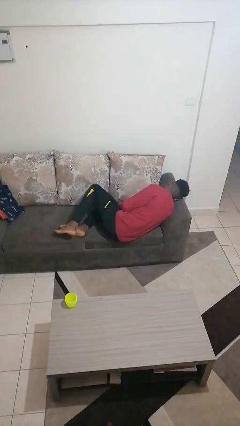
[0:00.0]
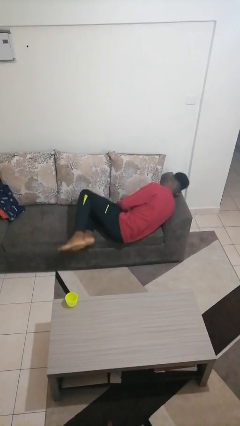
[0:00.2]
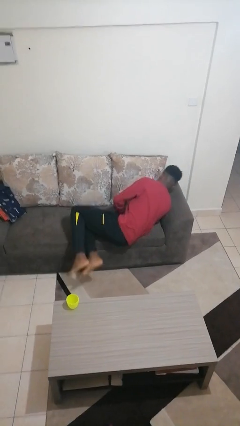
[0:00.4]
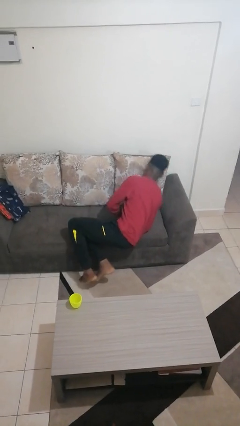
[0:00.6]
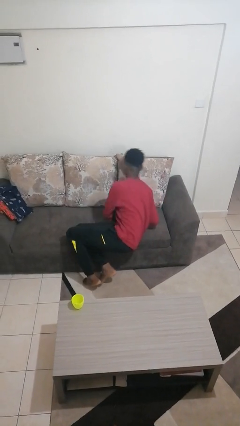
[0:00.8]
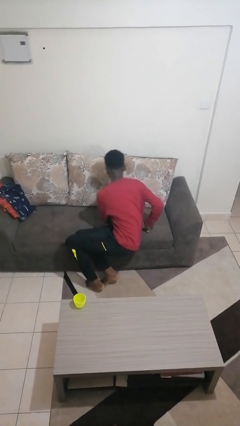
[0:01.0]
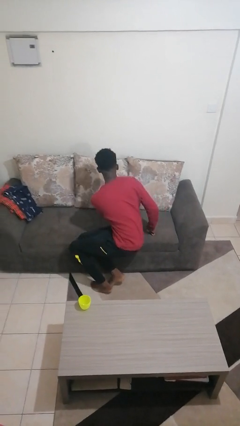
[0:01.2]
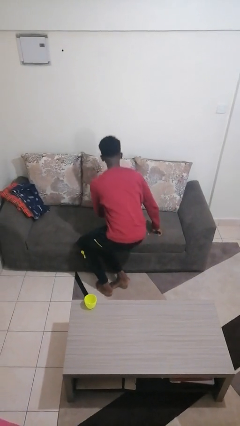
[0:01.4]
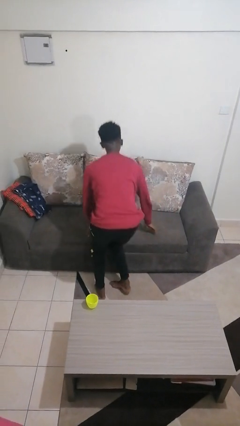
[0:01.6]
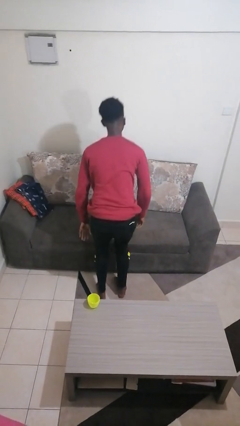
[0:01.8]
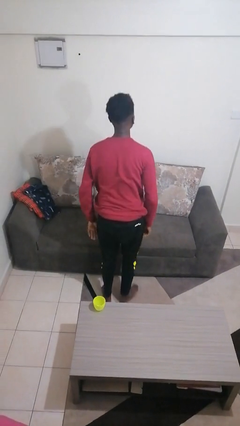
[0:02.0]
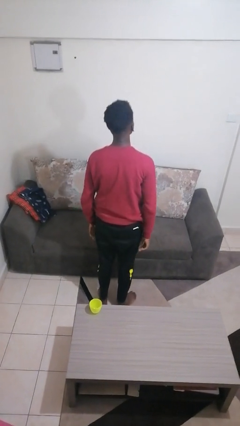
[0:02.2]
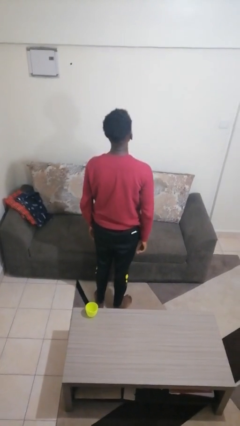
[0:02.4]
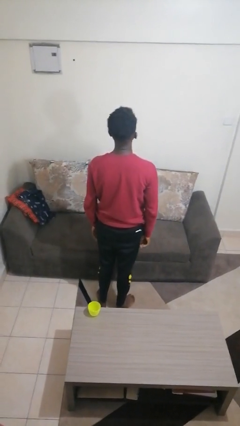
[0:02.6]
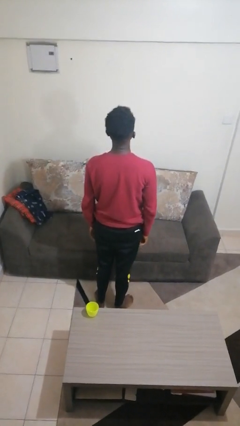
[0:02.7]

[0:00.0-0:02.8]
person stands up

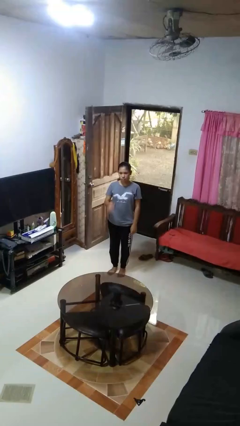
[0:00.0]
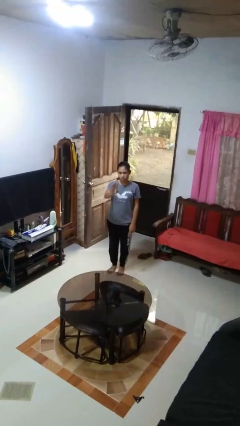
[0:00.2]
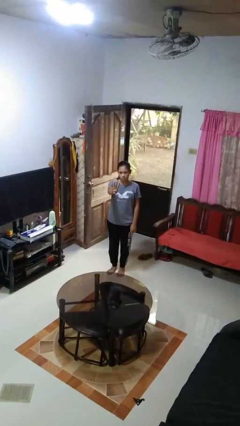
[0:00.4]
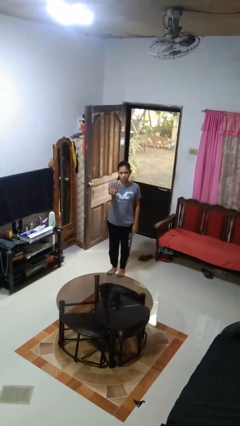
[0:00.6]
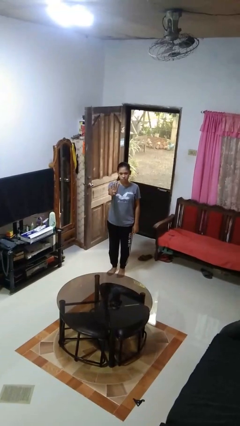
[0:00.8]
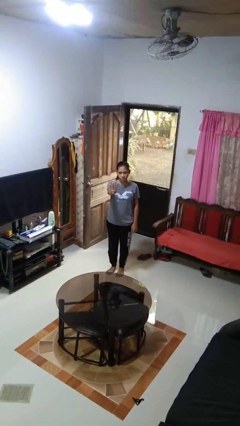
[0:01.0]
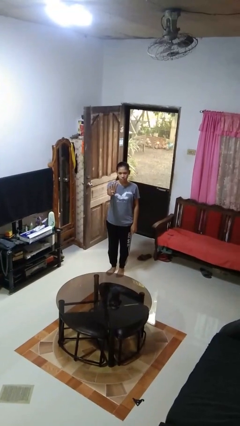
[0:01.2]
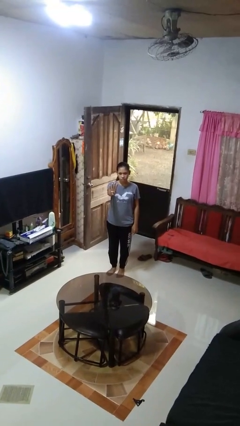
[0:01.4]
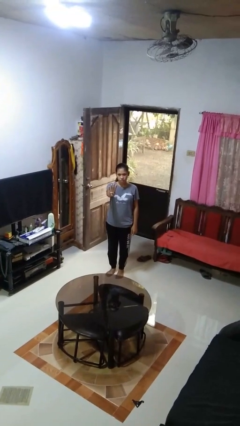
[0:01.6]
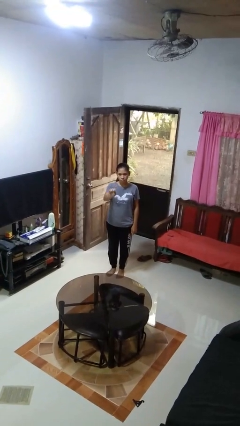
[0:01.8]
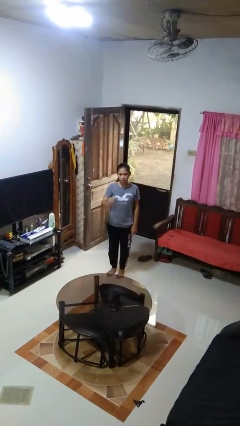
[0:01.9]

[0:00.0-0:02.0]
person gestures number four

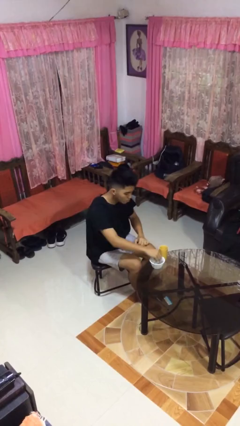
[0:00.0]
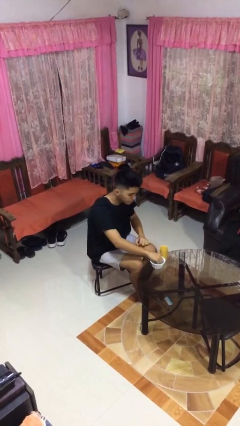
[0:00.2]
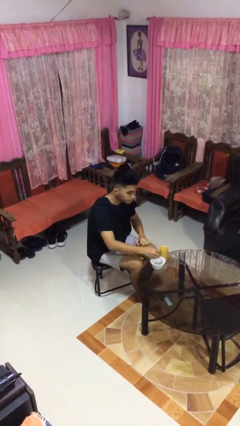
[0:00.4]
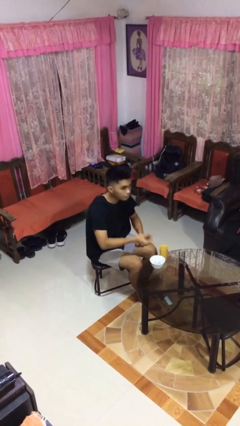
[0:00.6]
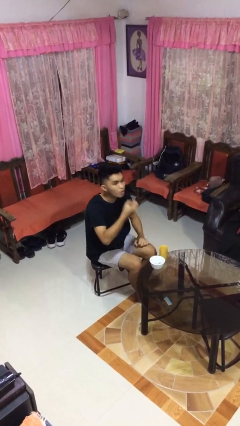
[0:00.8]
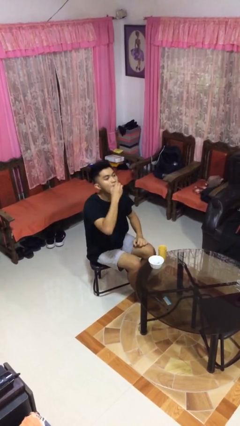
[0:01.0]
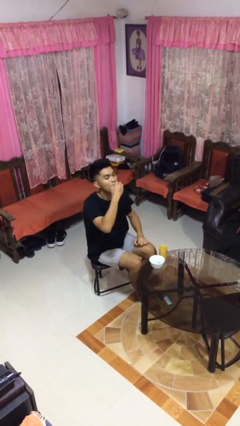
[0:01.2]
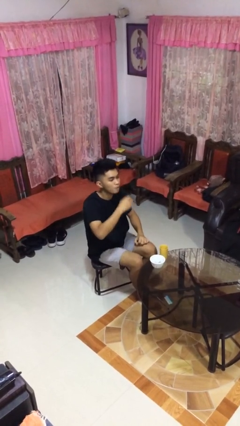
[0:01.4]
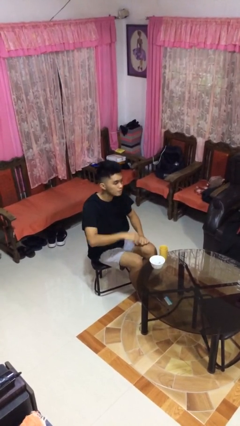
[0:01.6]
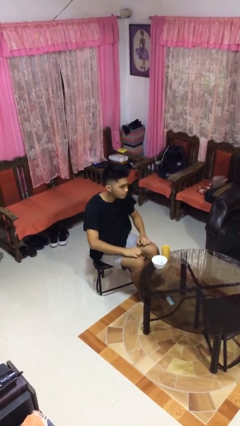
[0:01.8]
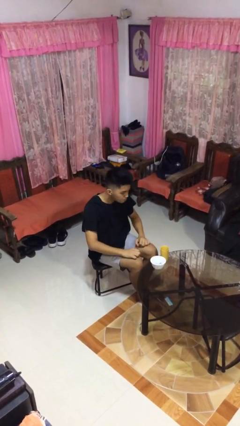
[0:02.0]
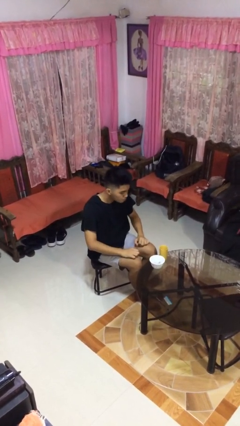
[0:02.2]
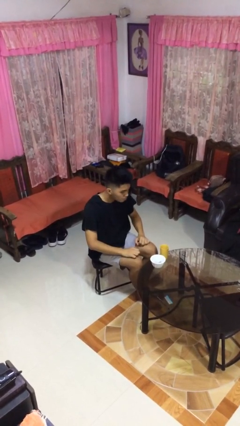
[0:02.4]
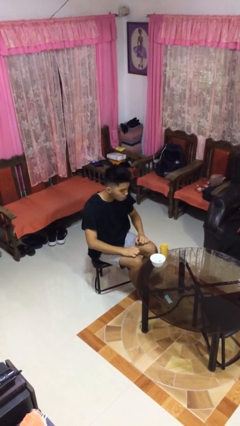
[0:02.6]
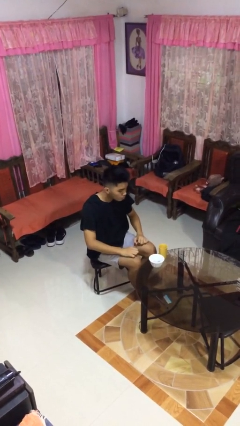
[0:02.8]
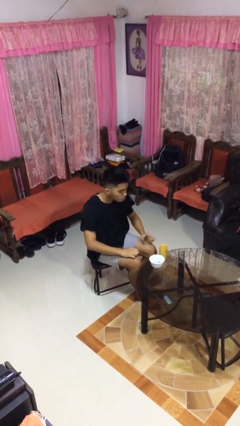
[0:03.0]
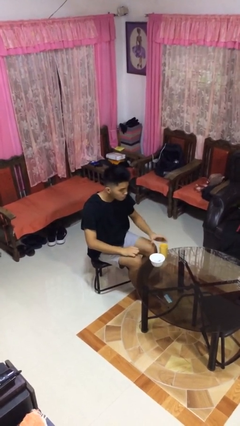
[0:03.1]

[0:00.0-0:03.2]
person takes medicine pills

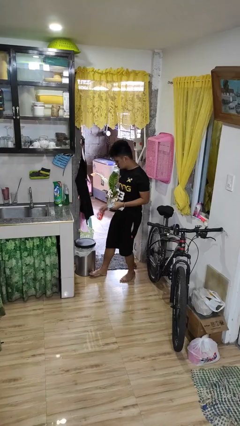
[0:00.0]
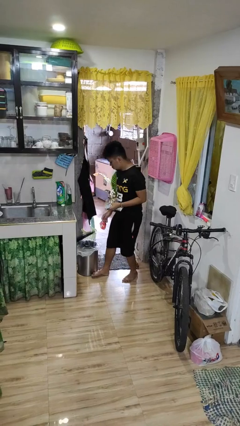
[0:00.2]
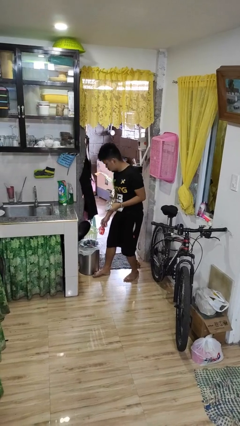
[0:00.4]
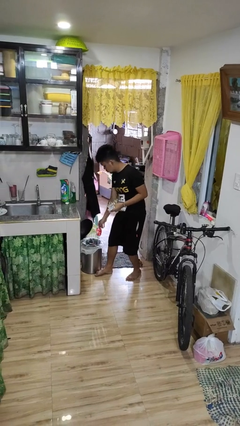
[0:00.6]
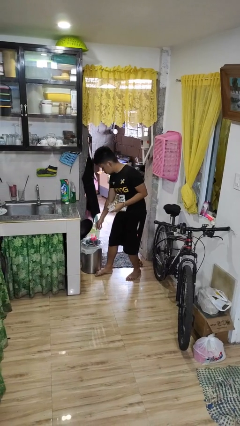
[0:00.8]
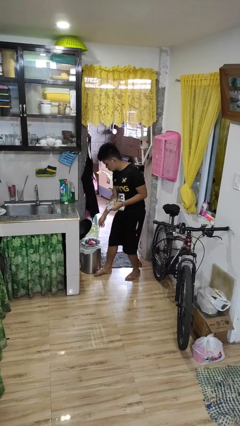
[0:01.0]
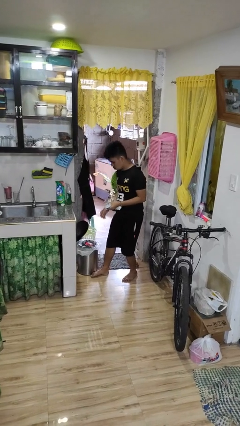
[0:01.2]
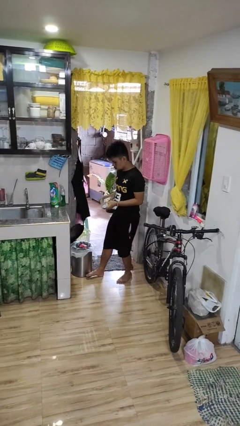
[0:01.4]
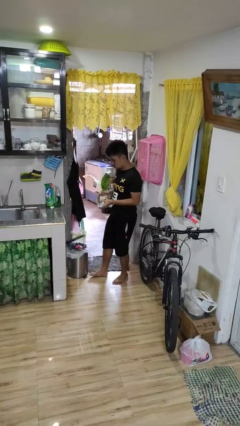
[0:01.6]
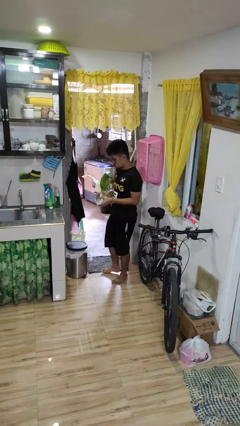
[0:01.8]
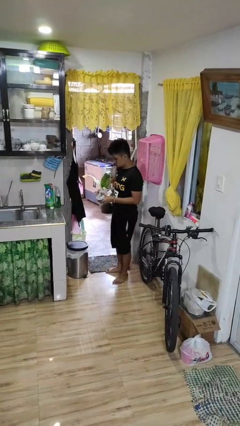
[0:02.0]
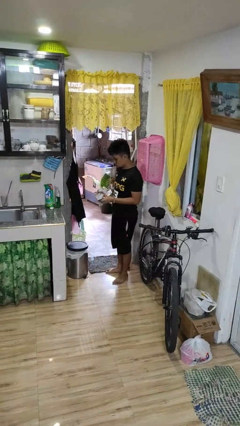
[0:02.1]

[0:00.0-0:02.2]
person discards trash

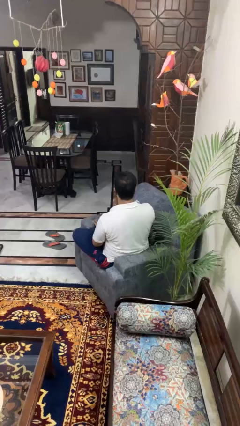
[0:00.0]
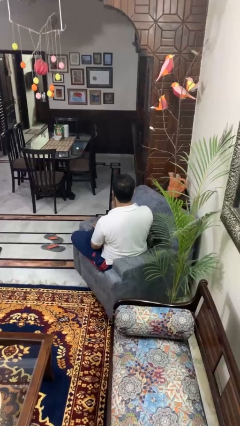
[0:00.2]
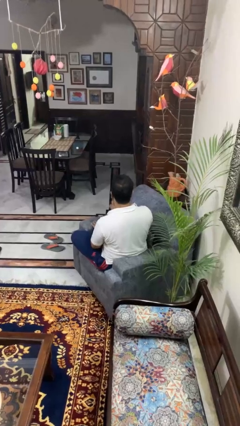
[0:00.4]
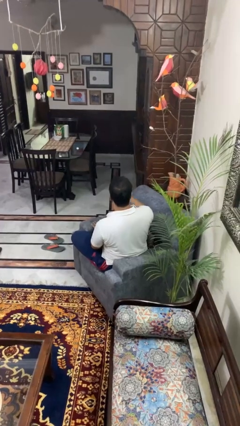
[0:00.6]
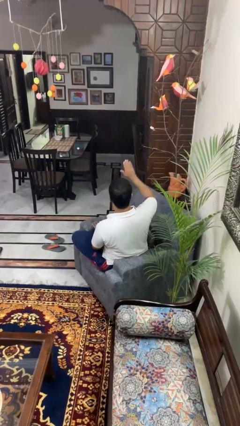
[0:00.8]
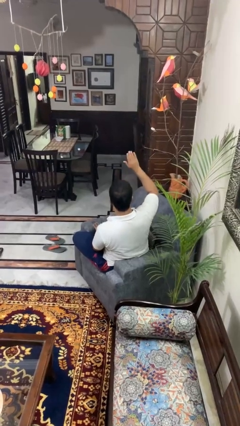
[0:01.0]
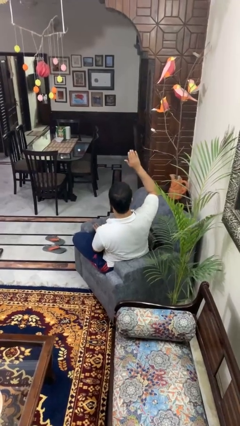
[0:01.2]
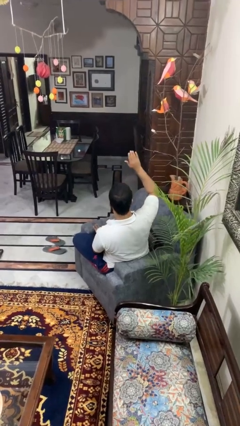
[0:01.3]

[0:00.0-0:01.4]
person gestures raise hand

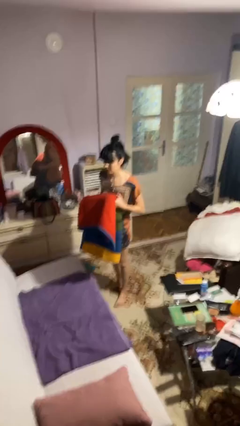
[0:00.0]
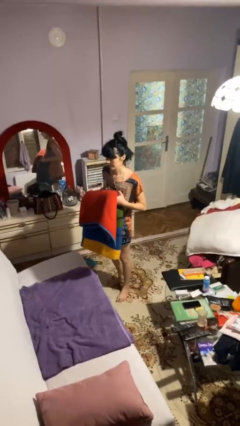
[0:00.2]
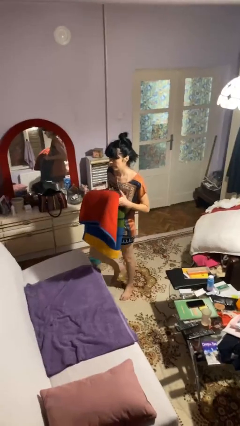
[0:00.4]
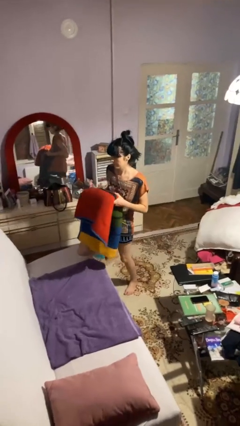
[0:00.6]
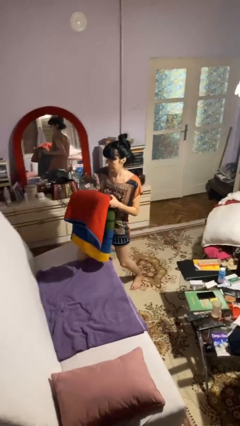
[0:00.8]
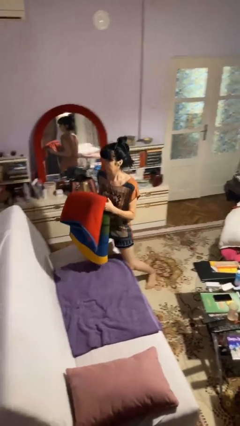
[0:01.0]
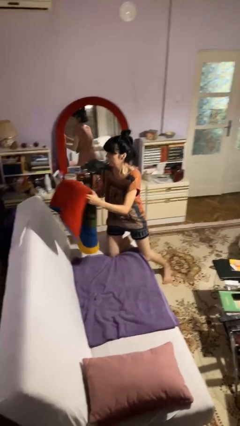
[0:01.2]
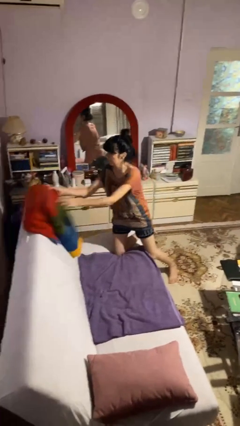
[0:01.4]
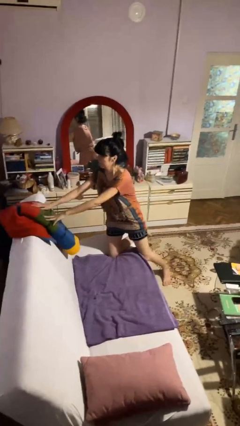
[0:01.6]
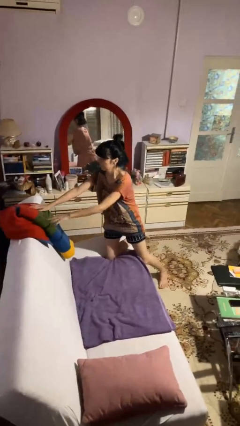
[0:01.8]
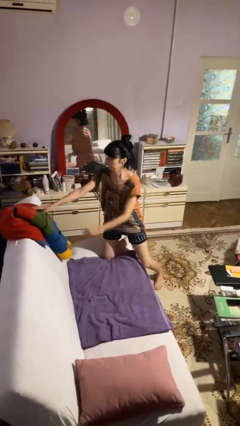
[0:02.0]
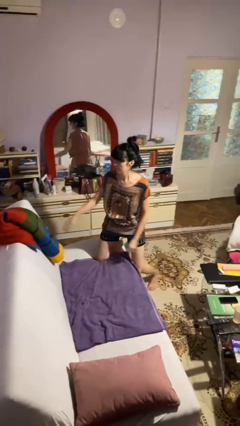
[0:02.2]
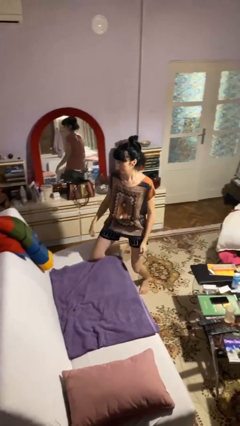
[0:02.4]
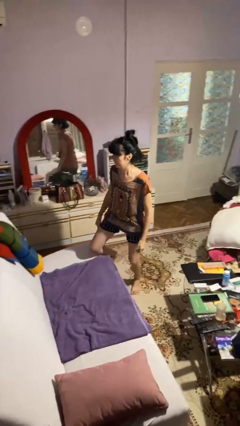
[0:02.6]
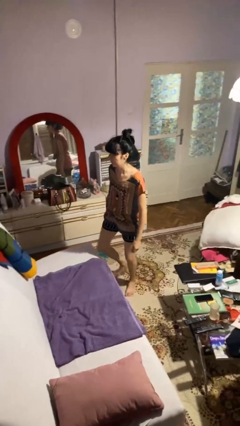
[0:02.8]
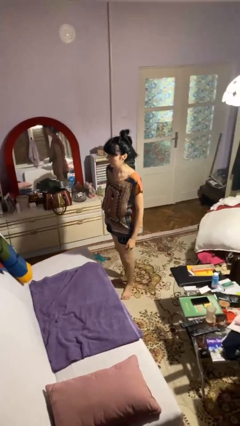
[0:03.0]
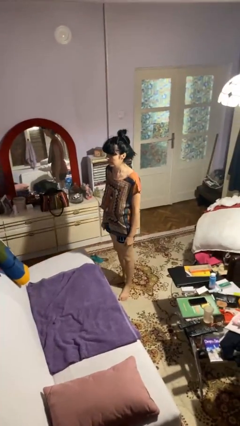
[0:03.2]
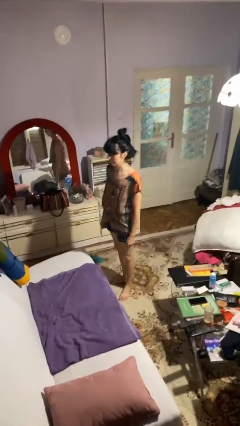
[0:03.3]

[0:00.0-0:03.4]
person puts down object on couch

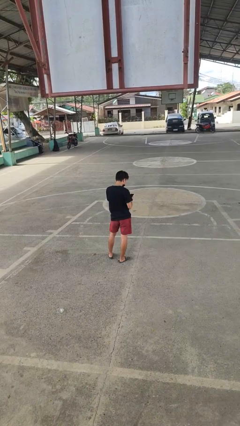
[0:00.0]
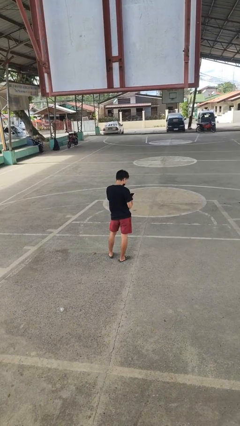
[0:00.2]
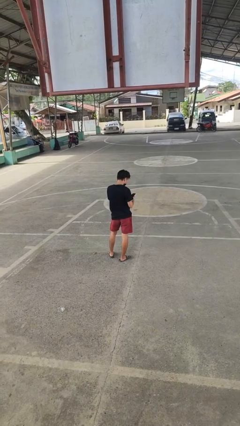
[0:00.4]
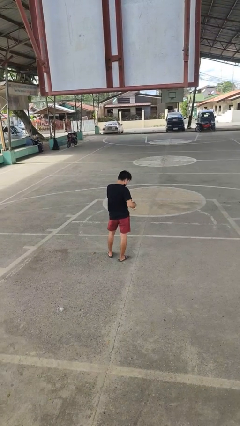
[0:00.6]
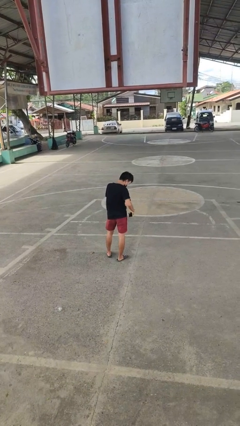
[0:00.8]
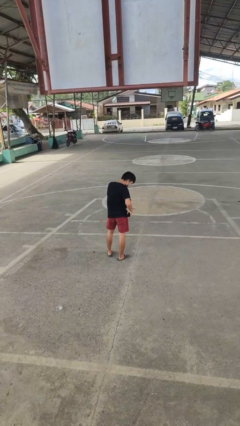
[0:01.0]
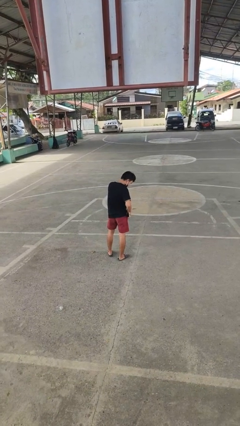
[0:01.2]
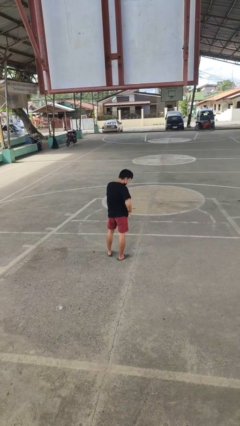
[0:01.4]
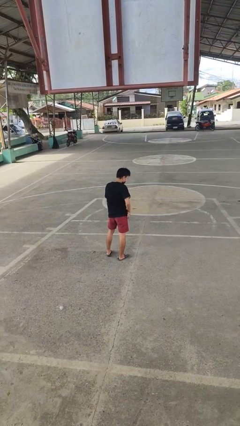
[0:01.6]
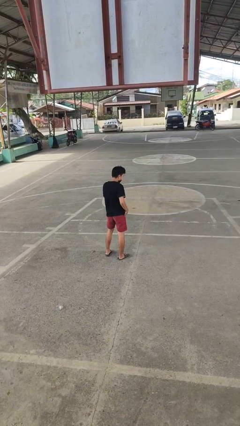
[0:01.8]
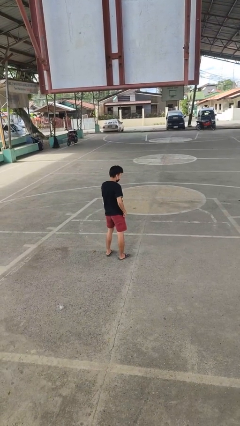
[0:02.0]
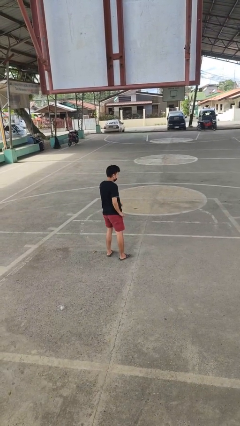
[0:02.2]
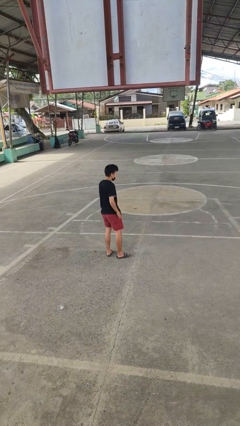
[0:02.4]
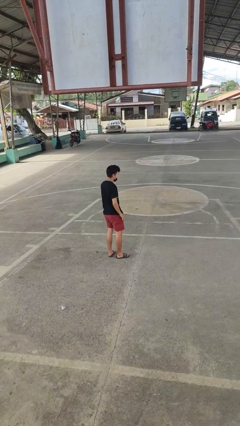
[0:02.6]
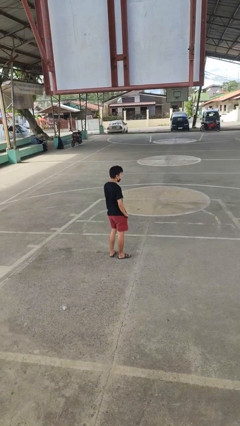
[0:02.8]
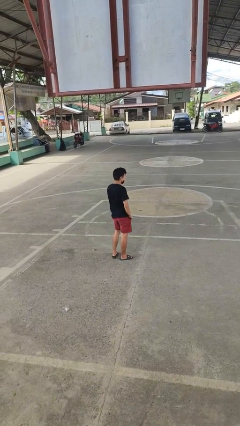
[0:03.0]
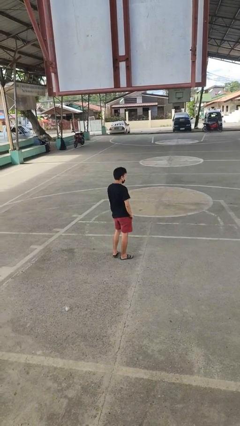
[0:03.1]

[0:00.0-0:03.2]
person puts phone into pocket
